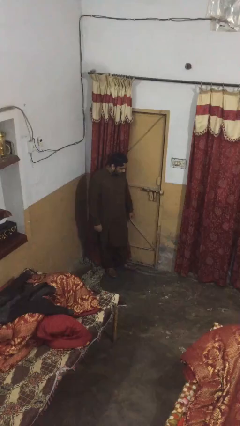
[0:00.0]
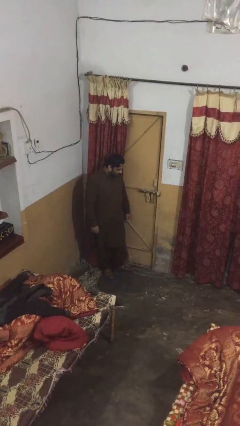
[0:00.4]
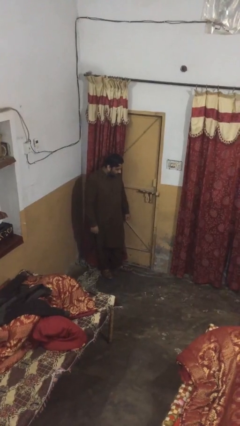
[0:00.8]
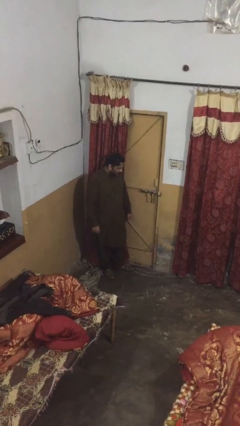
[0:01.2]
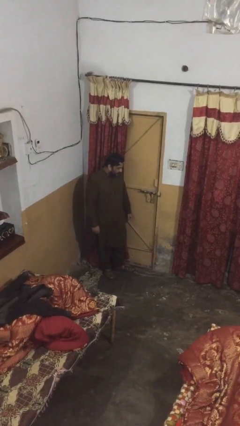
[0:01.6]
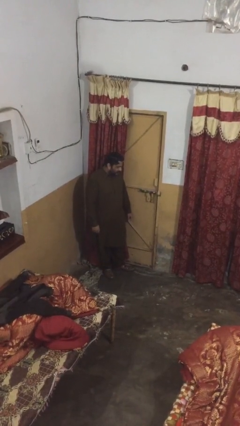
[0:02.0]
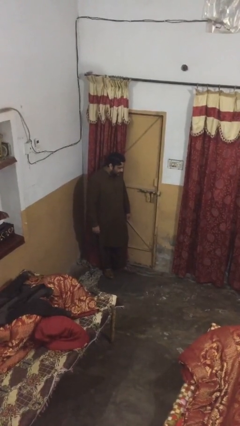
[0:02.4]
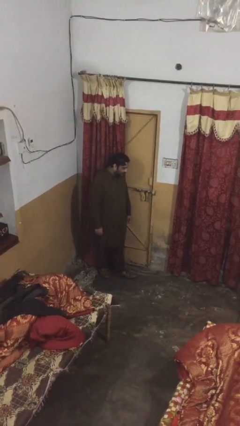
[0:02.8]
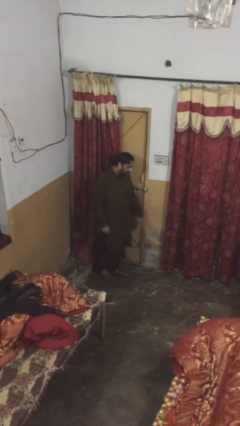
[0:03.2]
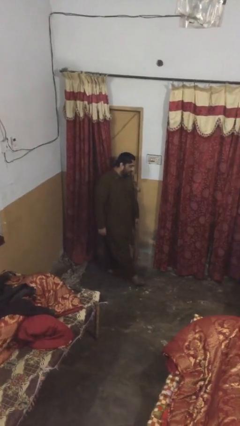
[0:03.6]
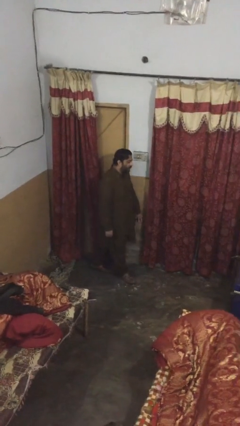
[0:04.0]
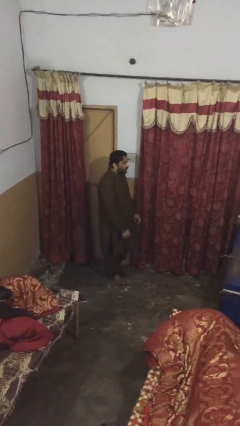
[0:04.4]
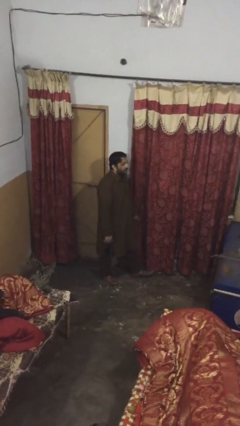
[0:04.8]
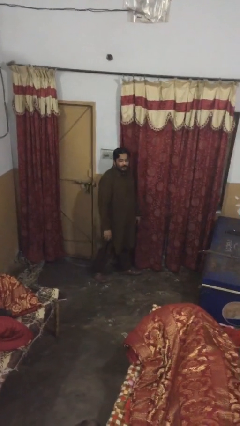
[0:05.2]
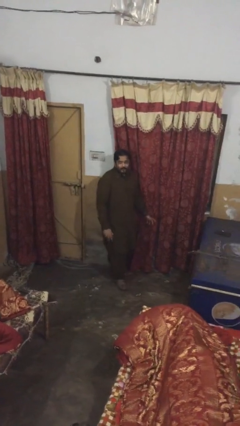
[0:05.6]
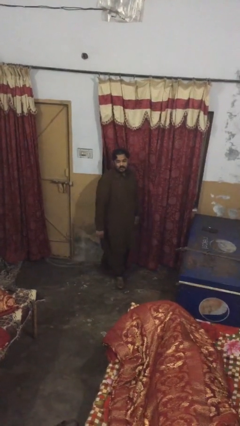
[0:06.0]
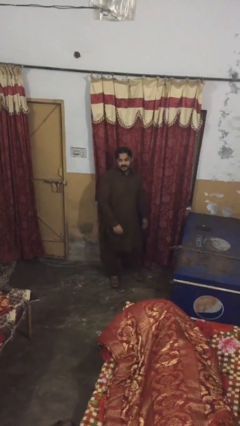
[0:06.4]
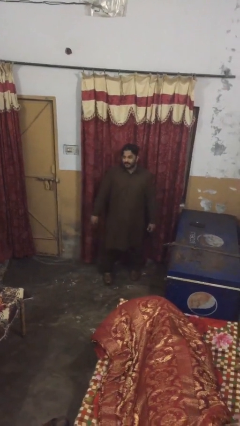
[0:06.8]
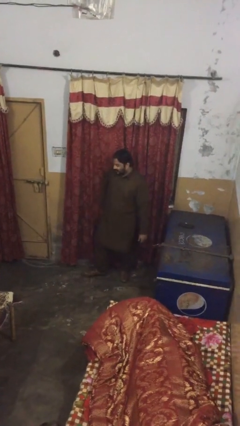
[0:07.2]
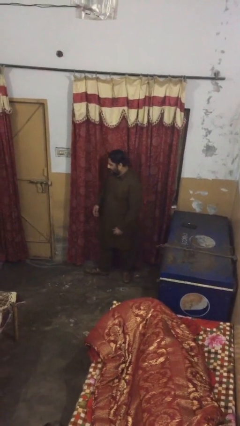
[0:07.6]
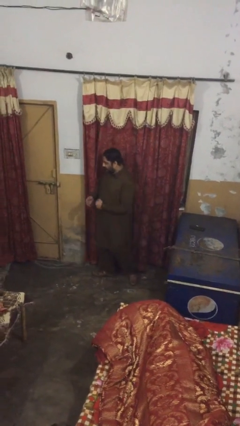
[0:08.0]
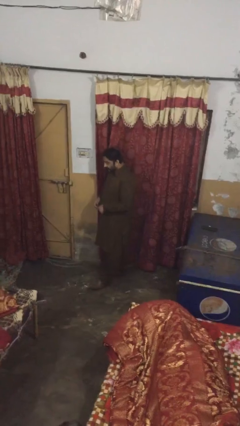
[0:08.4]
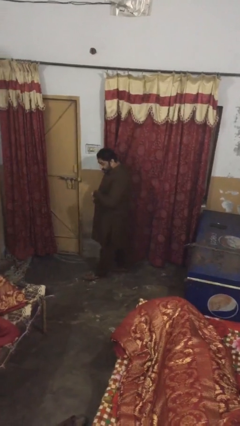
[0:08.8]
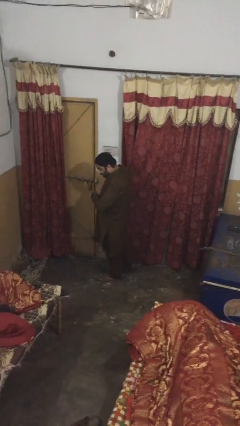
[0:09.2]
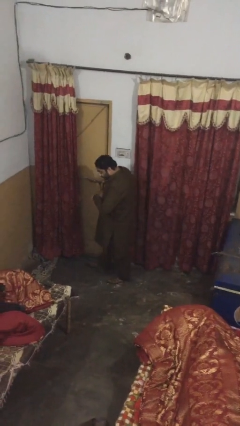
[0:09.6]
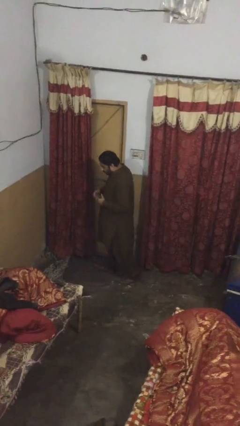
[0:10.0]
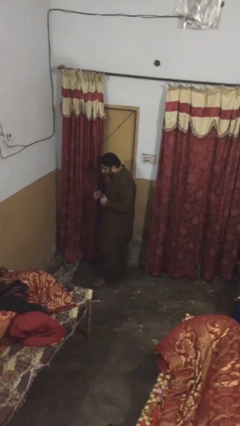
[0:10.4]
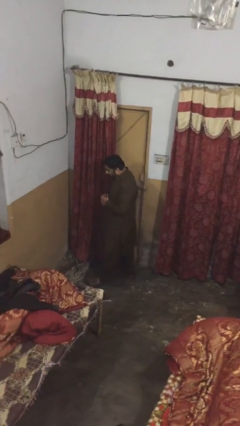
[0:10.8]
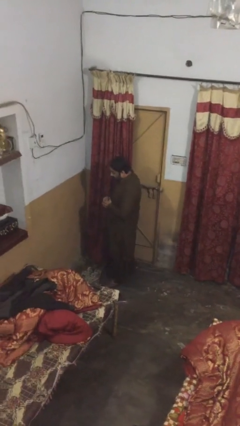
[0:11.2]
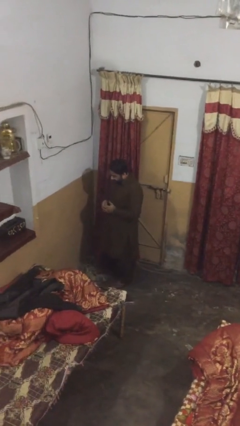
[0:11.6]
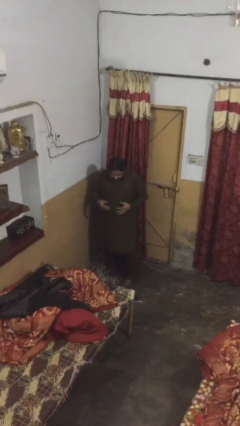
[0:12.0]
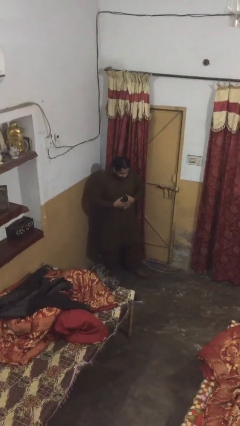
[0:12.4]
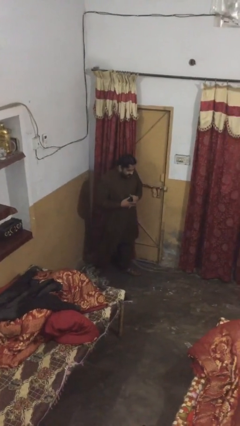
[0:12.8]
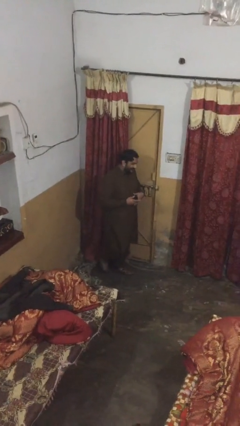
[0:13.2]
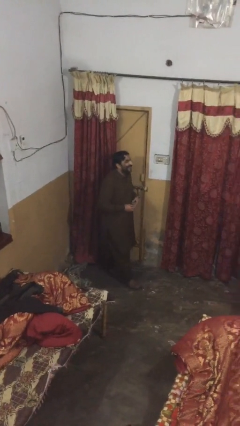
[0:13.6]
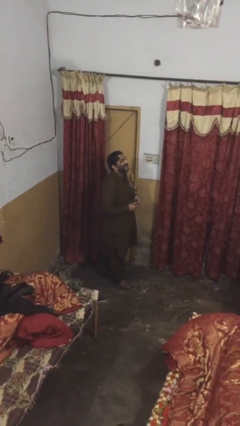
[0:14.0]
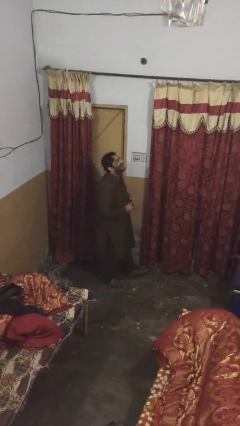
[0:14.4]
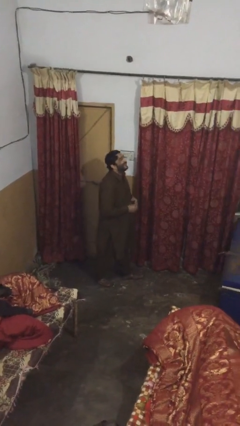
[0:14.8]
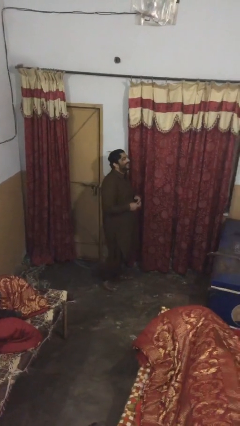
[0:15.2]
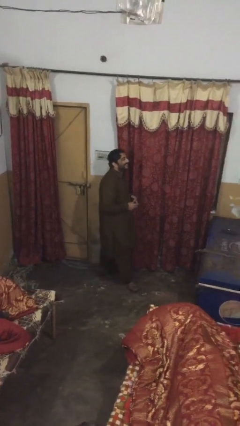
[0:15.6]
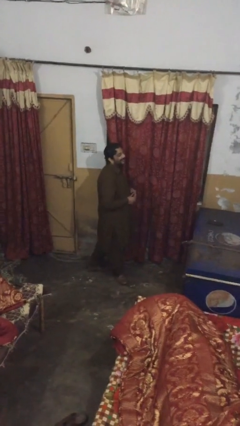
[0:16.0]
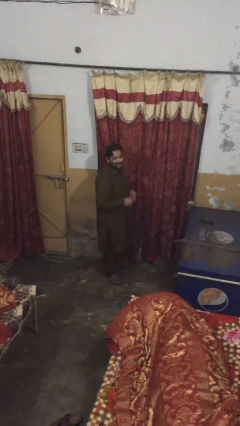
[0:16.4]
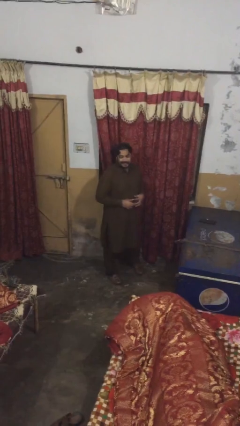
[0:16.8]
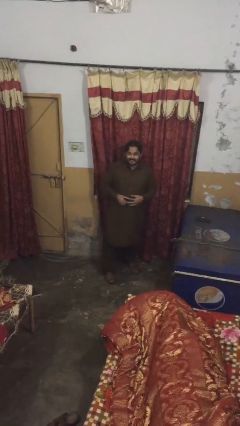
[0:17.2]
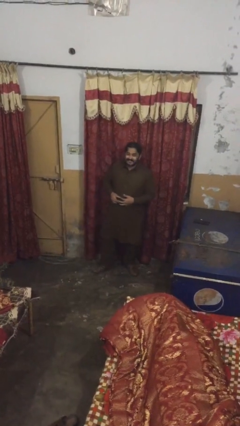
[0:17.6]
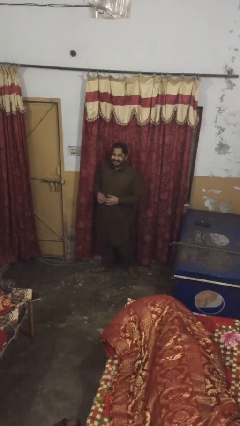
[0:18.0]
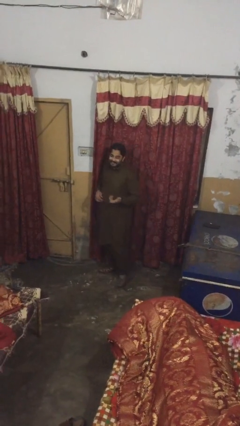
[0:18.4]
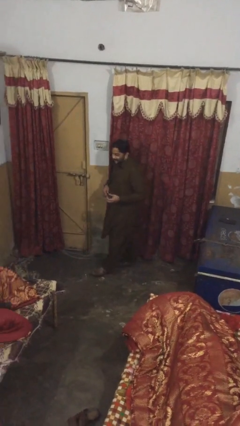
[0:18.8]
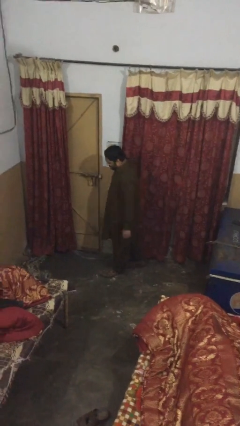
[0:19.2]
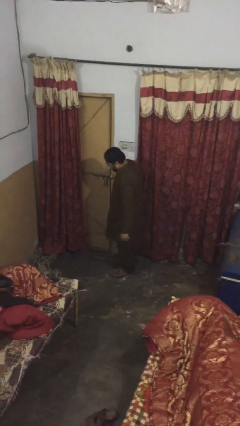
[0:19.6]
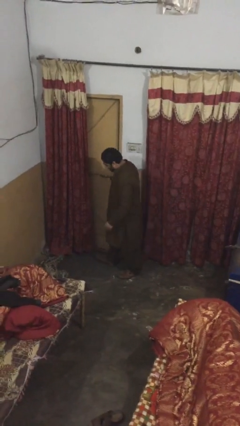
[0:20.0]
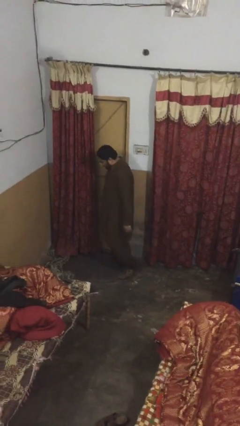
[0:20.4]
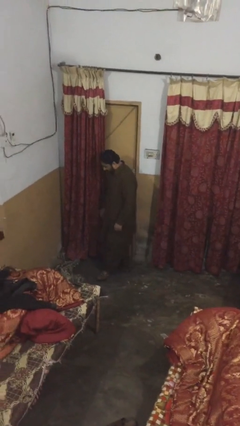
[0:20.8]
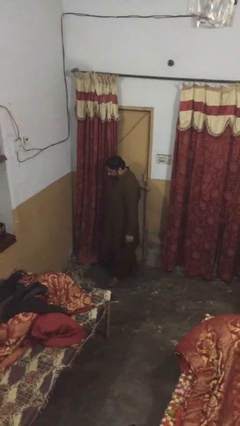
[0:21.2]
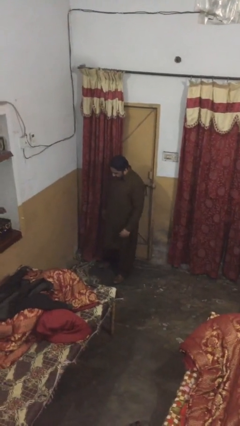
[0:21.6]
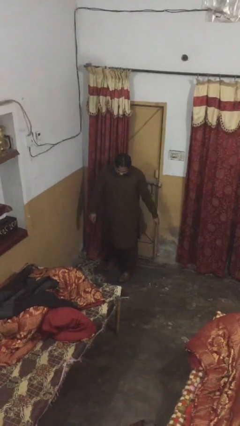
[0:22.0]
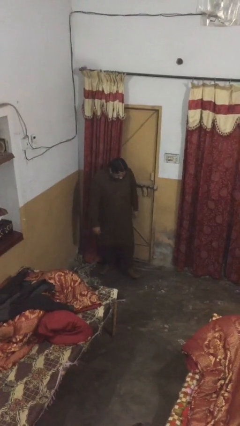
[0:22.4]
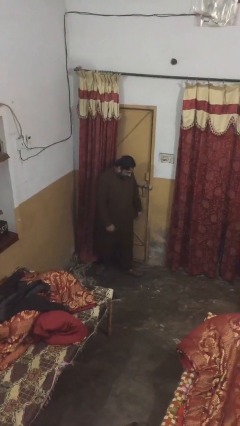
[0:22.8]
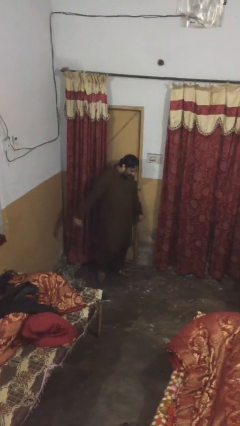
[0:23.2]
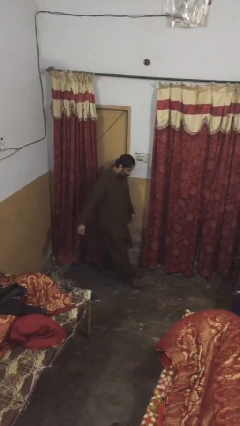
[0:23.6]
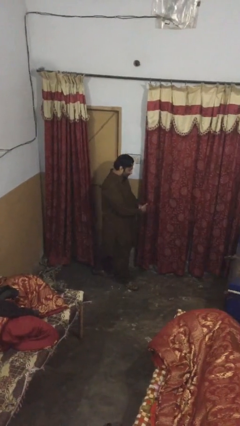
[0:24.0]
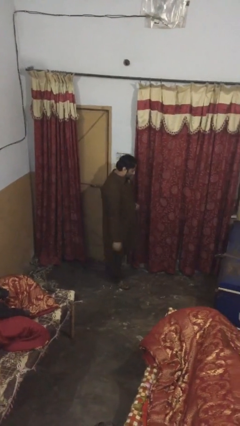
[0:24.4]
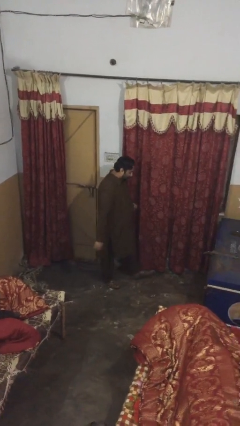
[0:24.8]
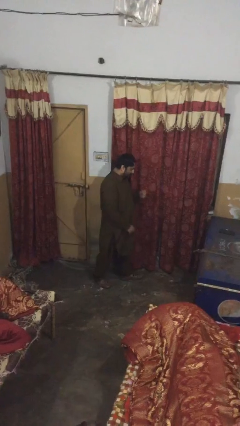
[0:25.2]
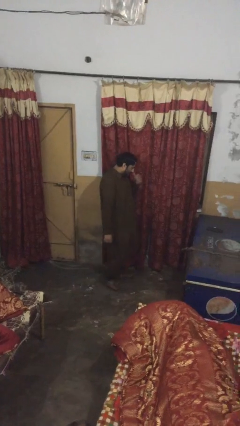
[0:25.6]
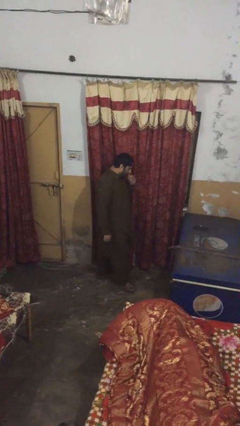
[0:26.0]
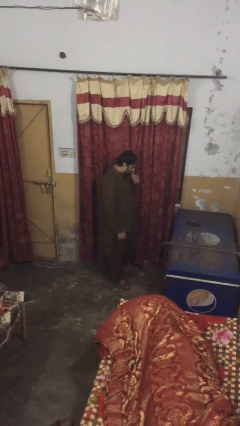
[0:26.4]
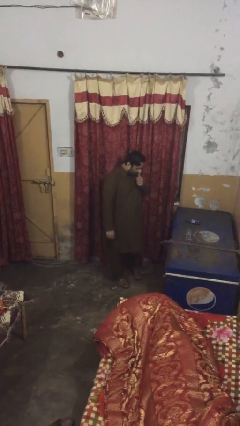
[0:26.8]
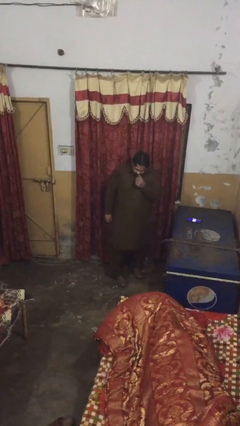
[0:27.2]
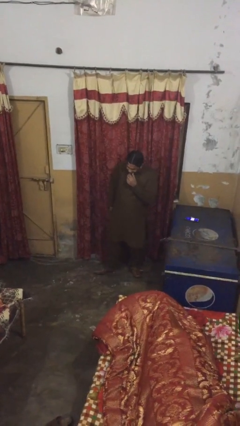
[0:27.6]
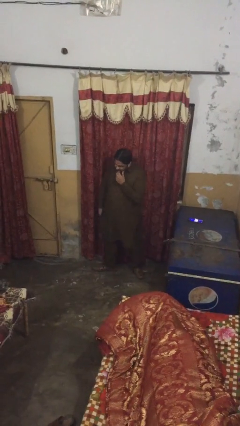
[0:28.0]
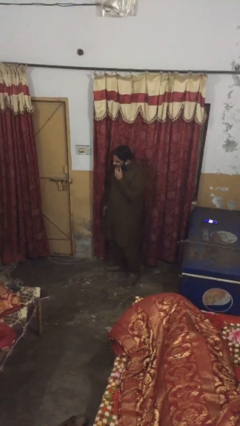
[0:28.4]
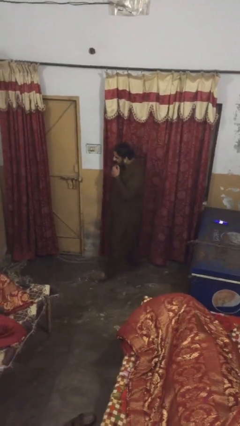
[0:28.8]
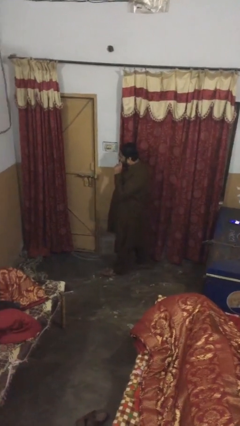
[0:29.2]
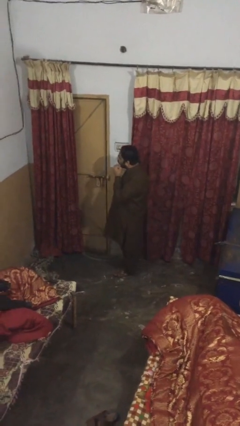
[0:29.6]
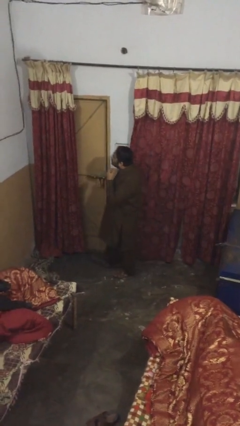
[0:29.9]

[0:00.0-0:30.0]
person walks

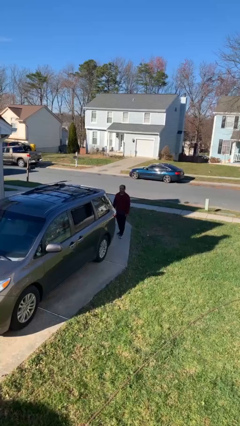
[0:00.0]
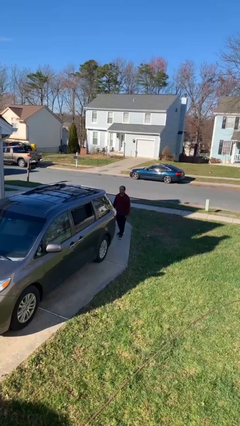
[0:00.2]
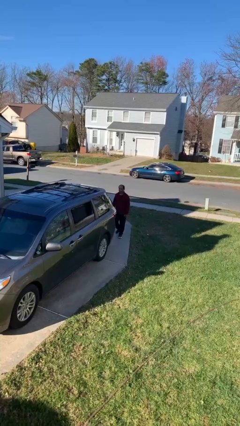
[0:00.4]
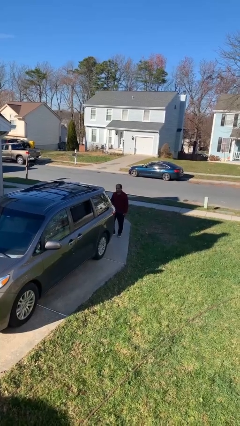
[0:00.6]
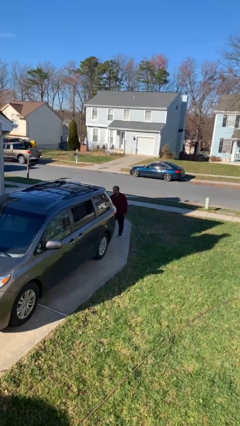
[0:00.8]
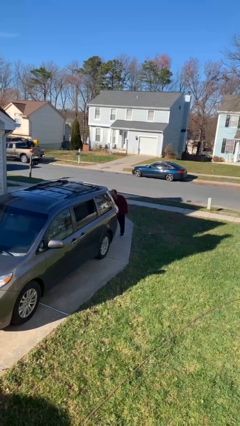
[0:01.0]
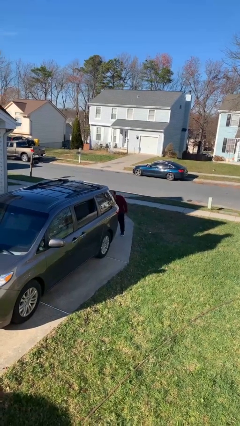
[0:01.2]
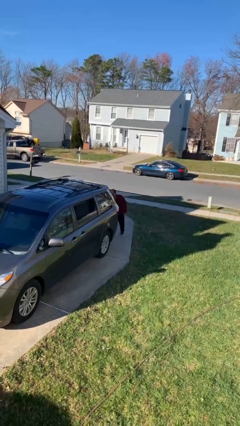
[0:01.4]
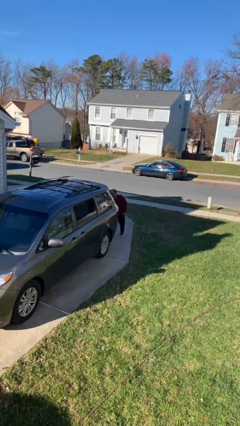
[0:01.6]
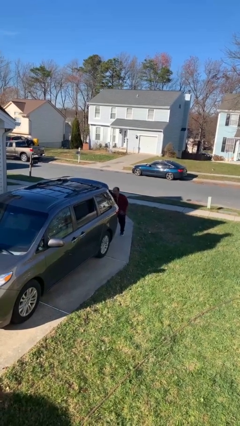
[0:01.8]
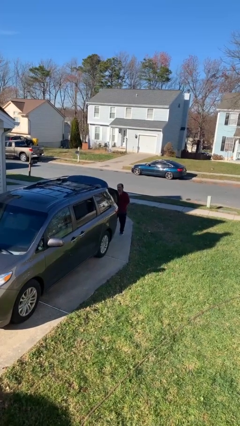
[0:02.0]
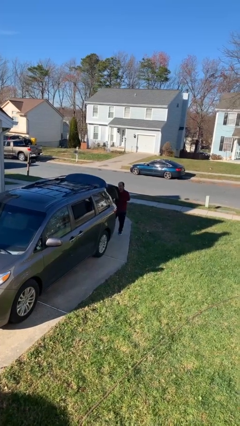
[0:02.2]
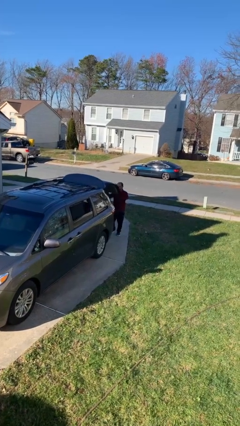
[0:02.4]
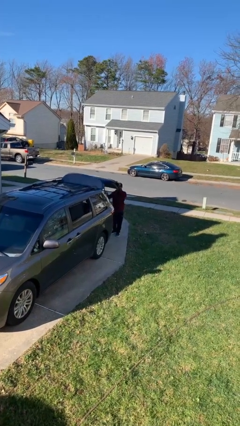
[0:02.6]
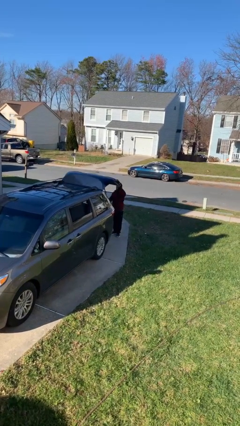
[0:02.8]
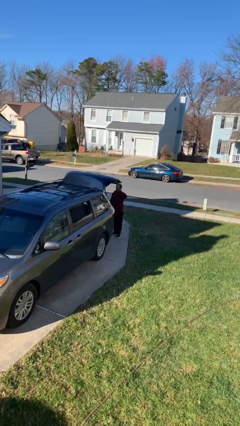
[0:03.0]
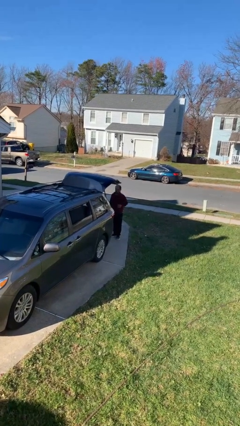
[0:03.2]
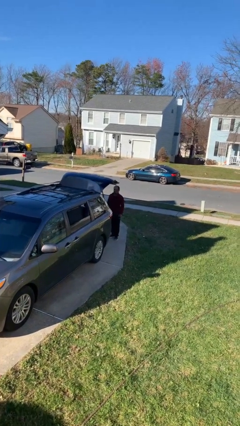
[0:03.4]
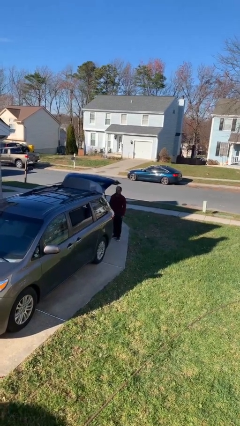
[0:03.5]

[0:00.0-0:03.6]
person opens car trunk
